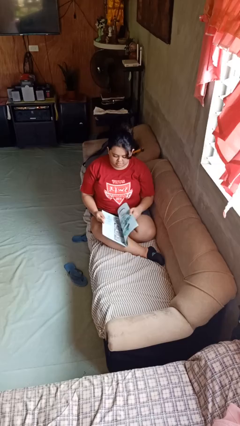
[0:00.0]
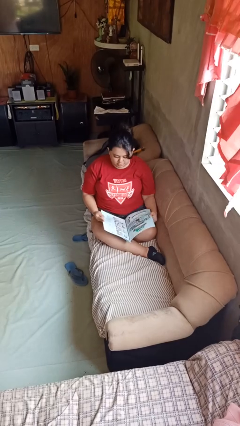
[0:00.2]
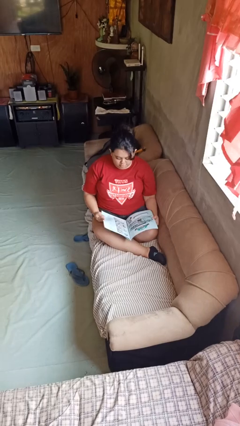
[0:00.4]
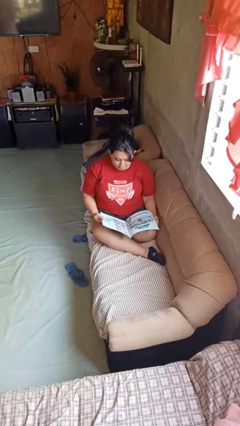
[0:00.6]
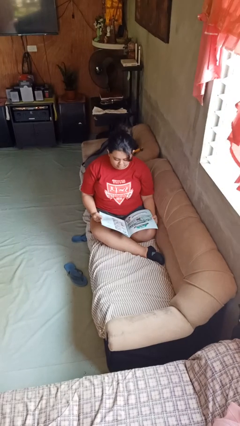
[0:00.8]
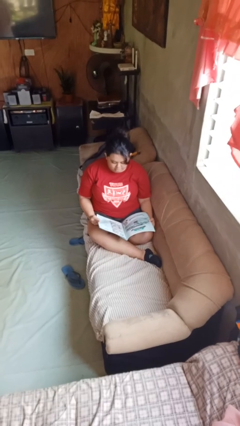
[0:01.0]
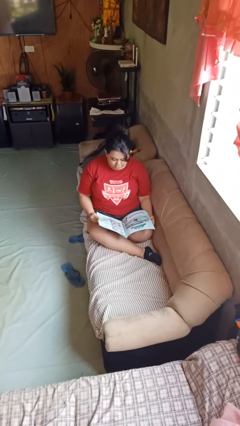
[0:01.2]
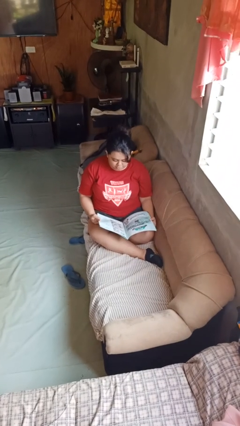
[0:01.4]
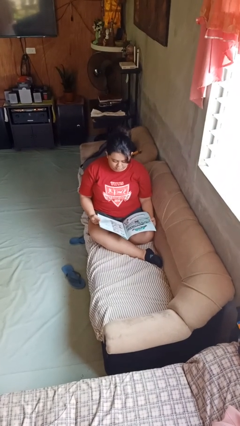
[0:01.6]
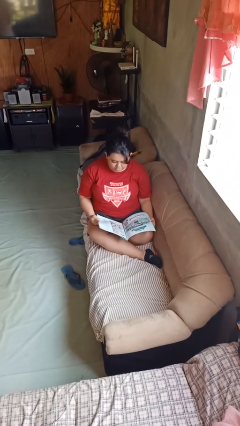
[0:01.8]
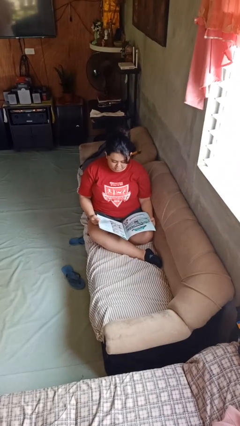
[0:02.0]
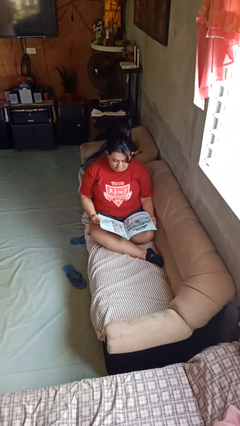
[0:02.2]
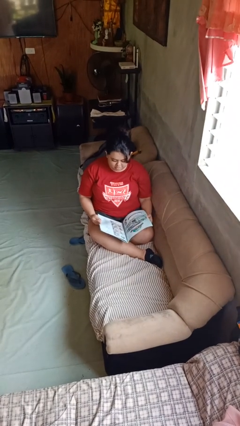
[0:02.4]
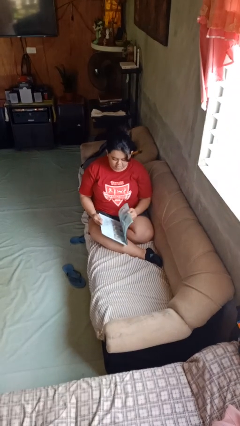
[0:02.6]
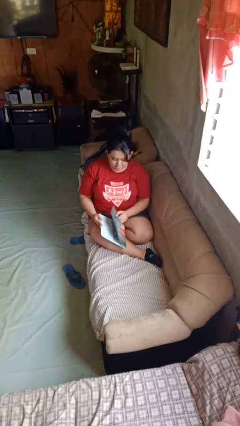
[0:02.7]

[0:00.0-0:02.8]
person reads magazine

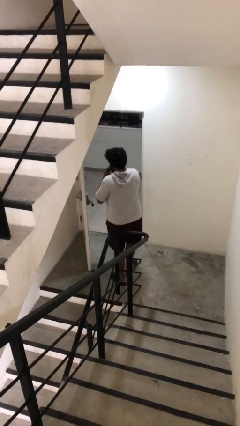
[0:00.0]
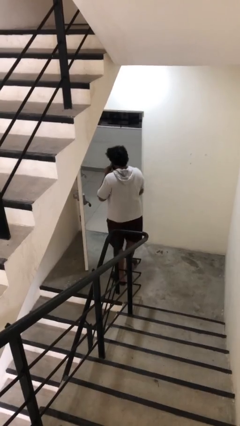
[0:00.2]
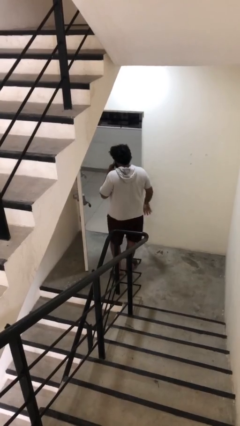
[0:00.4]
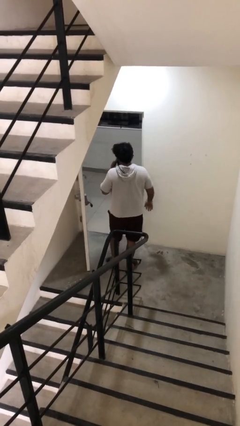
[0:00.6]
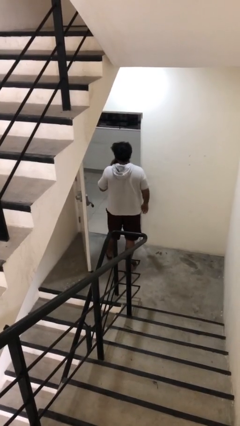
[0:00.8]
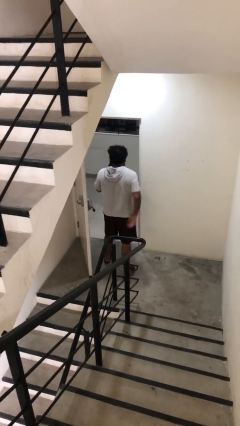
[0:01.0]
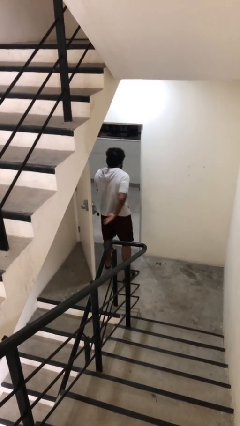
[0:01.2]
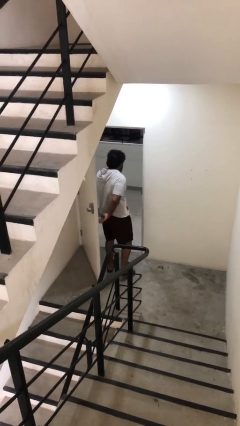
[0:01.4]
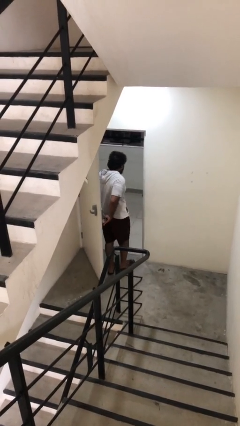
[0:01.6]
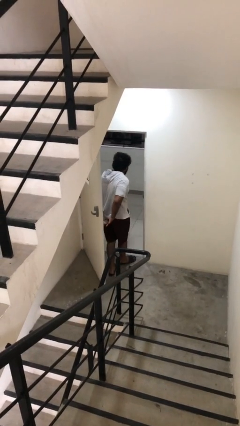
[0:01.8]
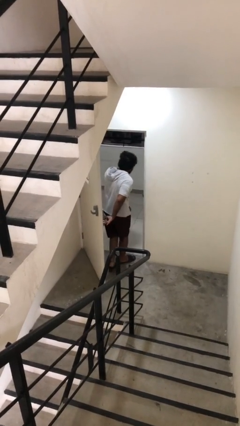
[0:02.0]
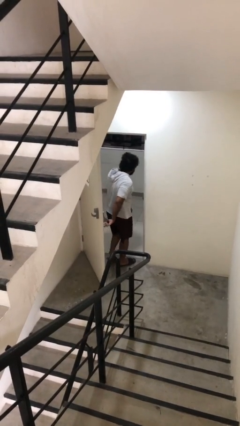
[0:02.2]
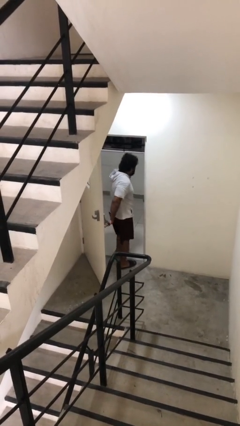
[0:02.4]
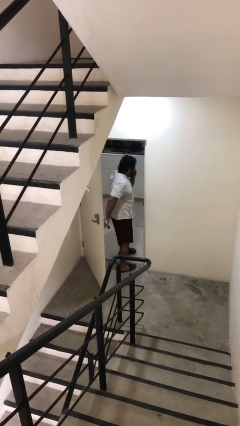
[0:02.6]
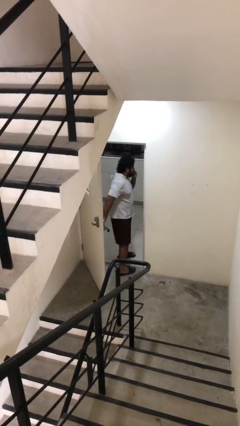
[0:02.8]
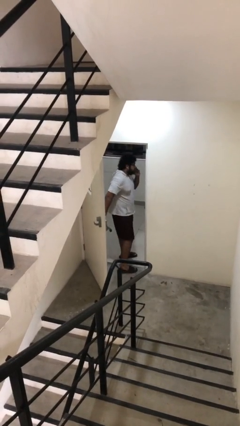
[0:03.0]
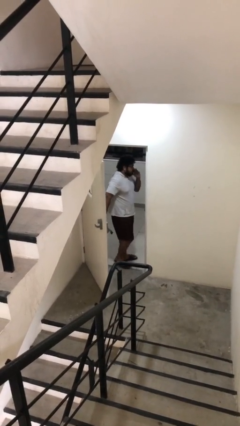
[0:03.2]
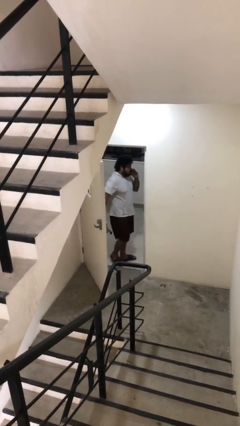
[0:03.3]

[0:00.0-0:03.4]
person exits scene through structure

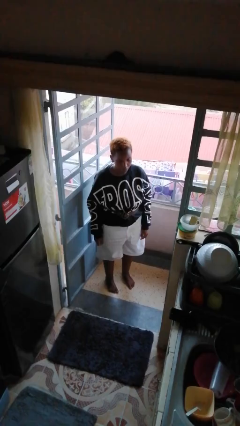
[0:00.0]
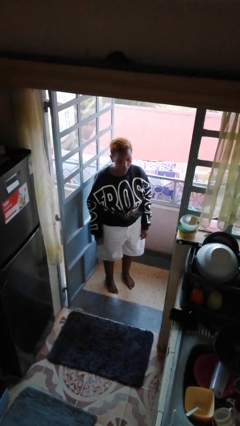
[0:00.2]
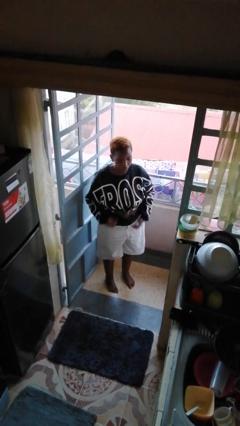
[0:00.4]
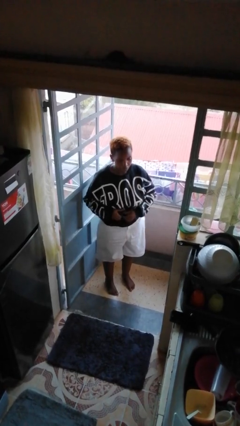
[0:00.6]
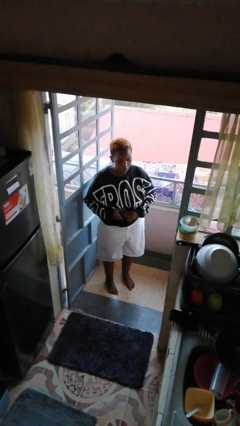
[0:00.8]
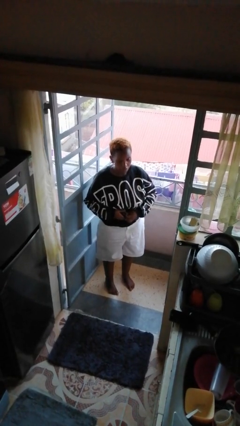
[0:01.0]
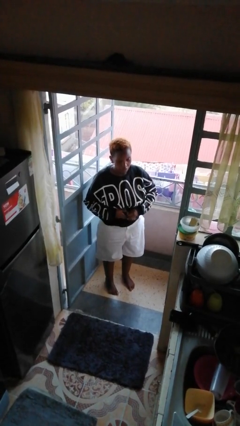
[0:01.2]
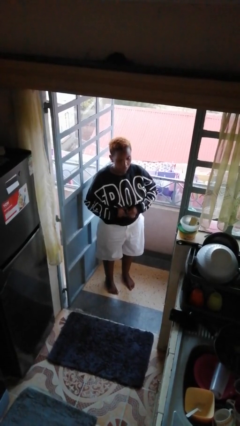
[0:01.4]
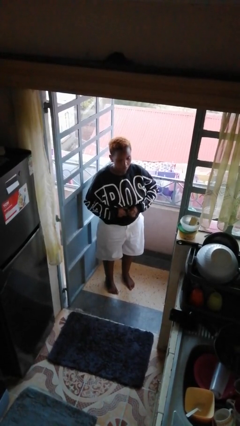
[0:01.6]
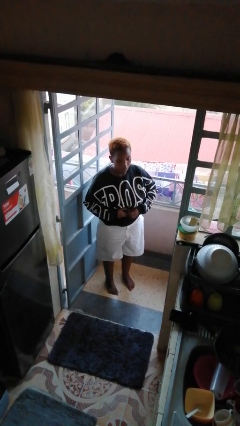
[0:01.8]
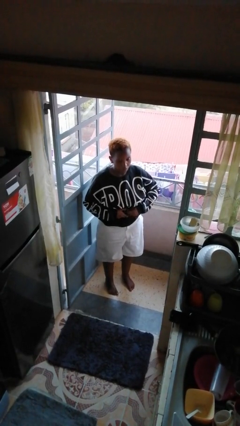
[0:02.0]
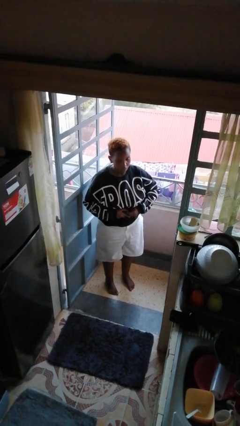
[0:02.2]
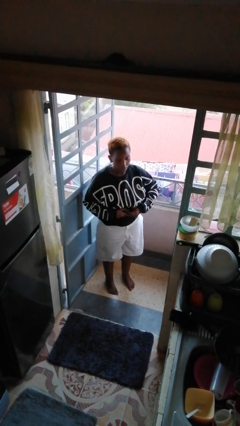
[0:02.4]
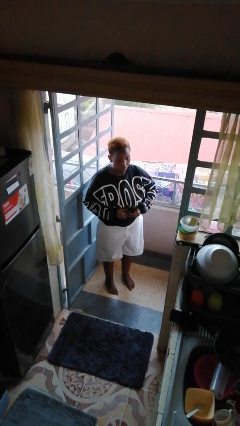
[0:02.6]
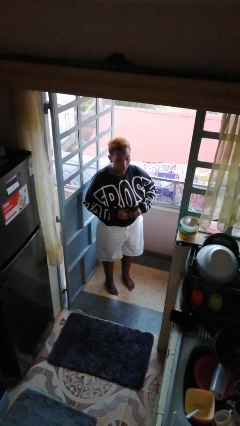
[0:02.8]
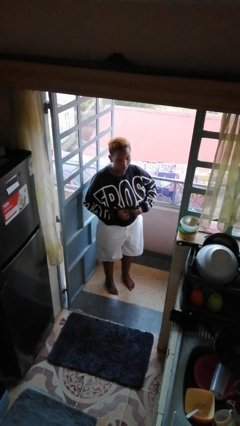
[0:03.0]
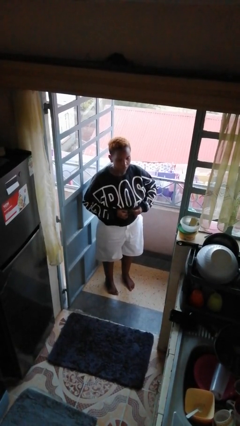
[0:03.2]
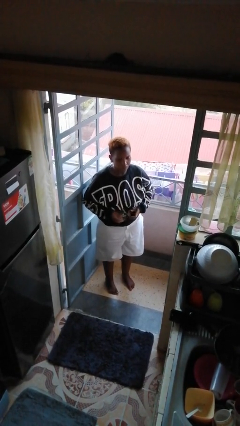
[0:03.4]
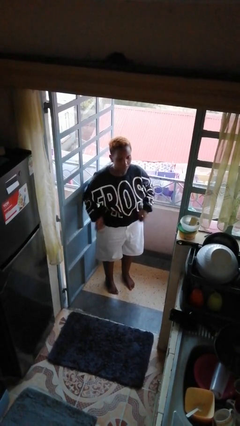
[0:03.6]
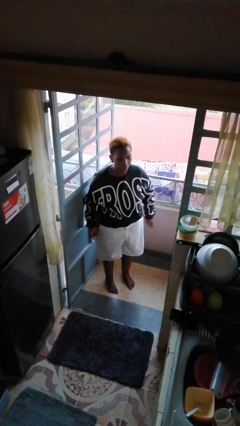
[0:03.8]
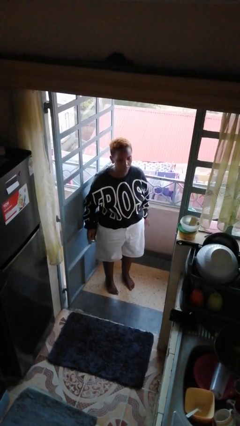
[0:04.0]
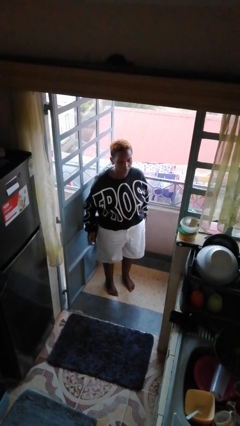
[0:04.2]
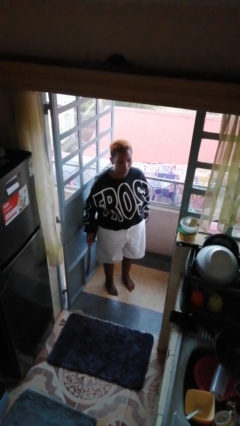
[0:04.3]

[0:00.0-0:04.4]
person takes off belt

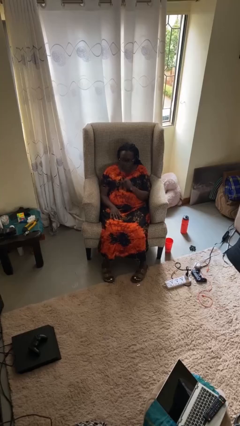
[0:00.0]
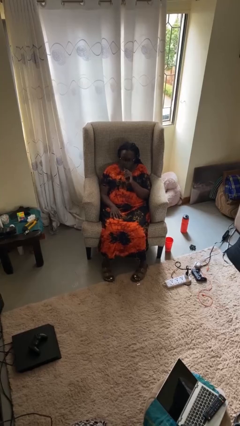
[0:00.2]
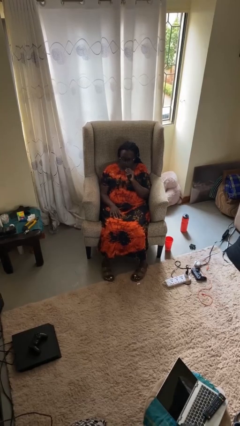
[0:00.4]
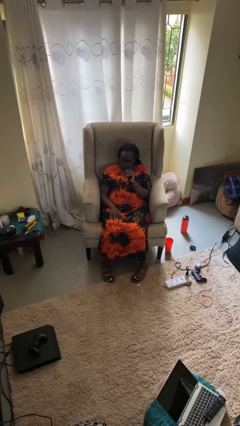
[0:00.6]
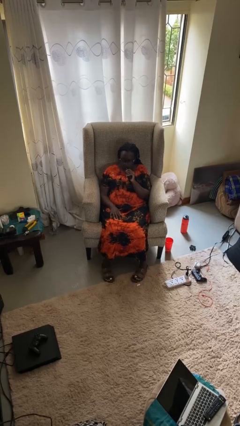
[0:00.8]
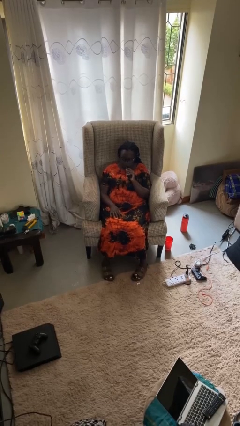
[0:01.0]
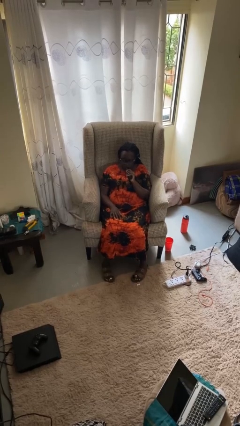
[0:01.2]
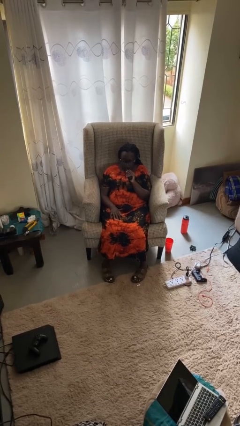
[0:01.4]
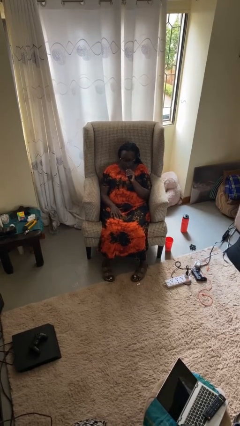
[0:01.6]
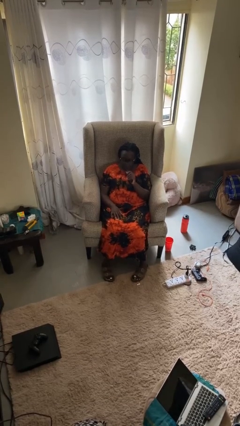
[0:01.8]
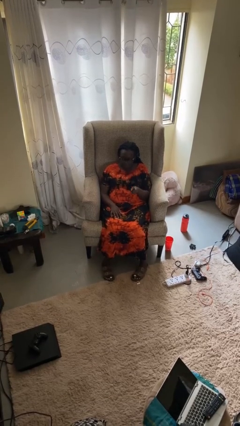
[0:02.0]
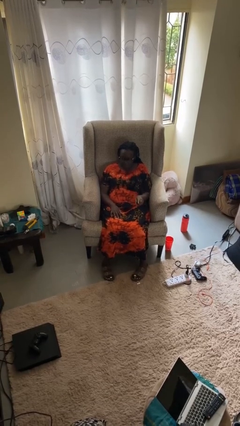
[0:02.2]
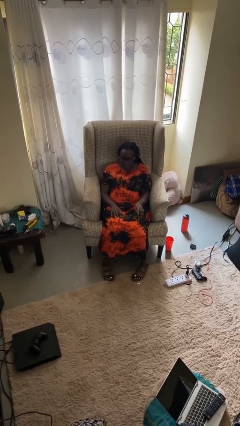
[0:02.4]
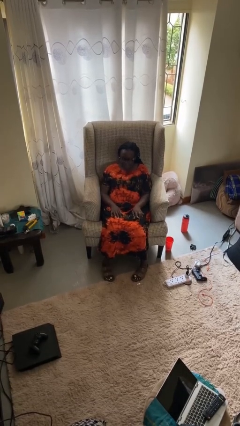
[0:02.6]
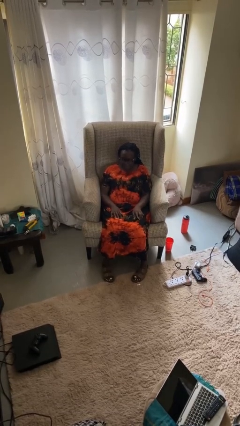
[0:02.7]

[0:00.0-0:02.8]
person vapes

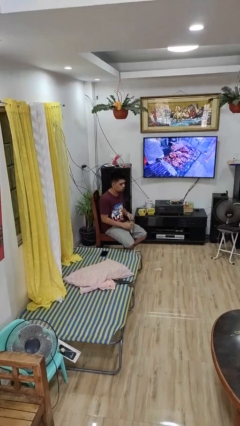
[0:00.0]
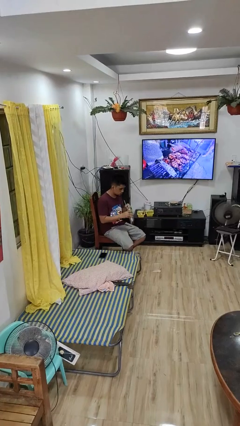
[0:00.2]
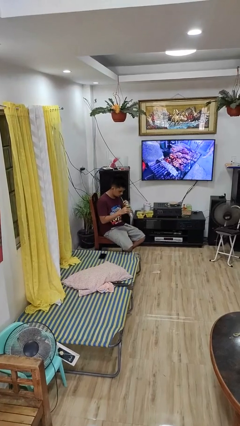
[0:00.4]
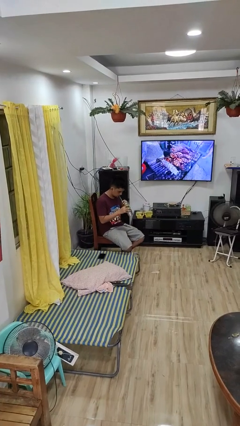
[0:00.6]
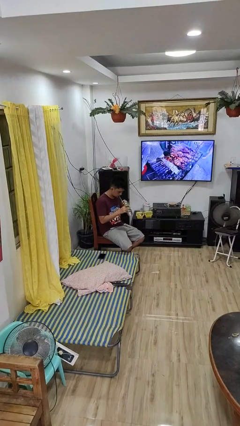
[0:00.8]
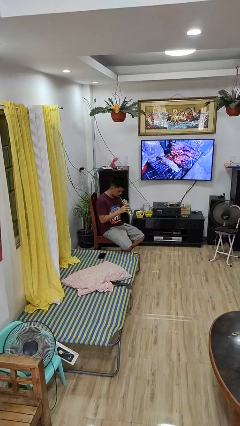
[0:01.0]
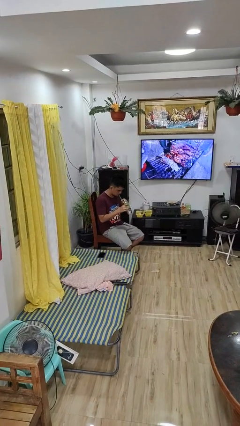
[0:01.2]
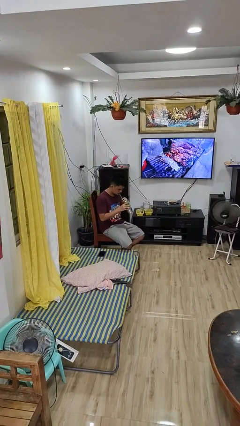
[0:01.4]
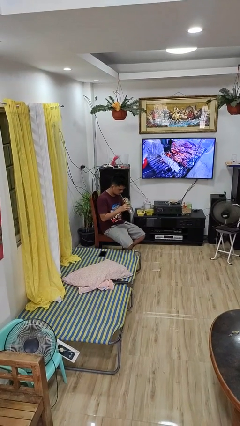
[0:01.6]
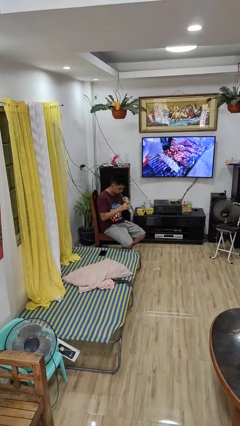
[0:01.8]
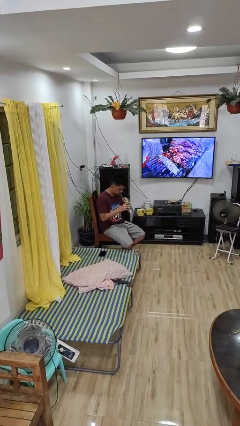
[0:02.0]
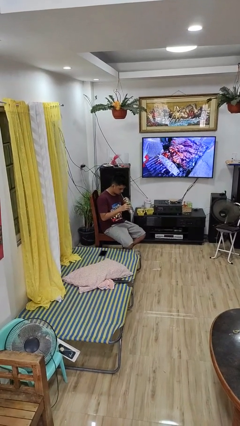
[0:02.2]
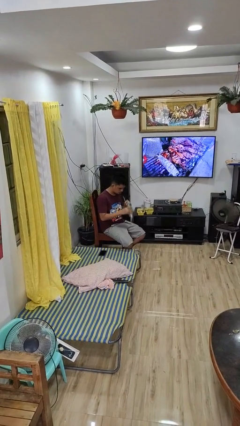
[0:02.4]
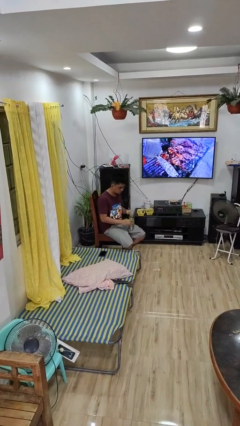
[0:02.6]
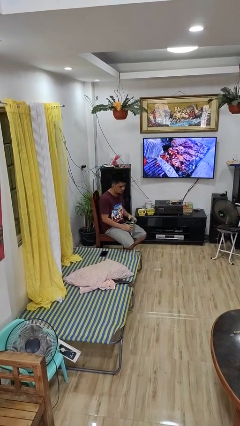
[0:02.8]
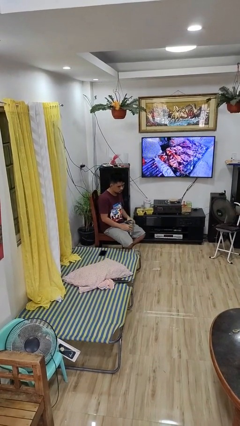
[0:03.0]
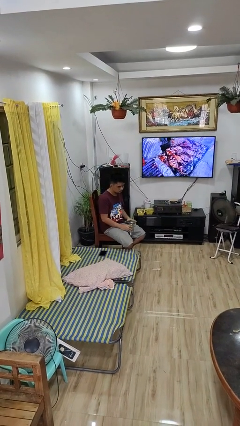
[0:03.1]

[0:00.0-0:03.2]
person drinks from straw

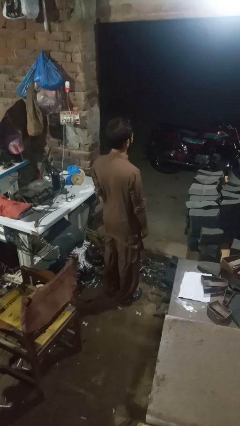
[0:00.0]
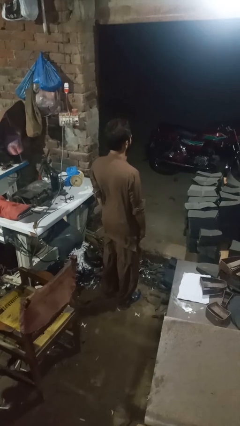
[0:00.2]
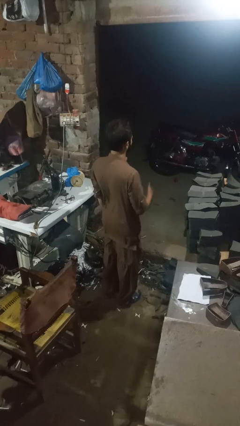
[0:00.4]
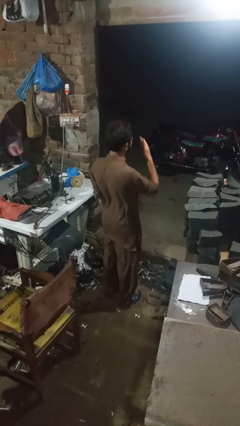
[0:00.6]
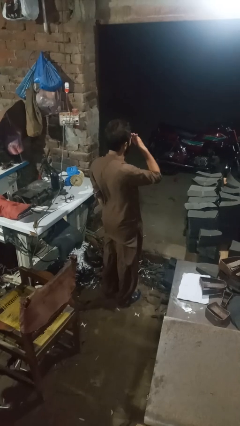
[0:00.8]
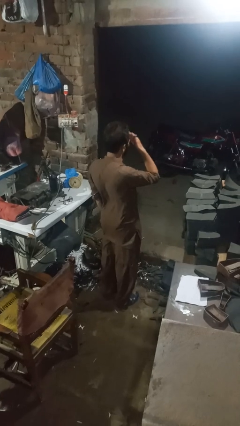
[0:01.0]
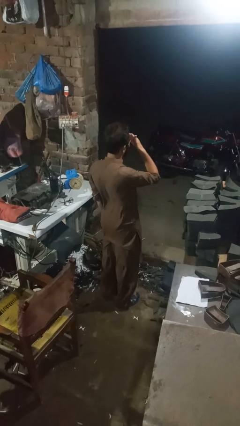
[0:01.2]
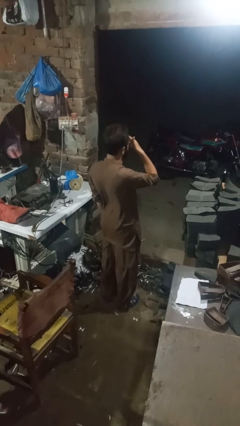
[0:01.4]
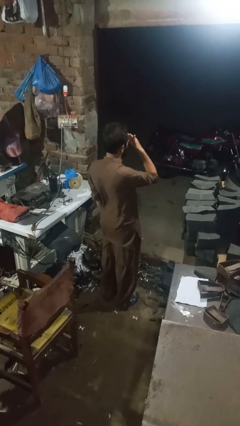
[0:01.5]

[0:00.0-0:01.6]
person rubs eyes
